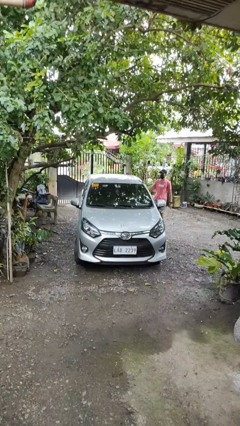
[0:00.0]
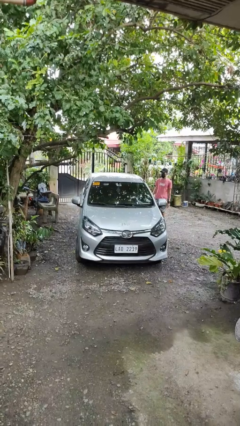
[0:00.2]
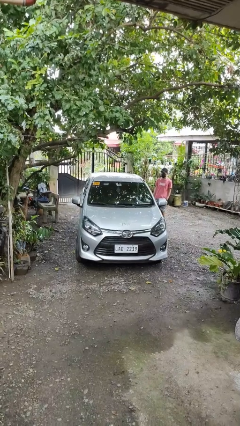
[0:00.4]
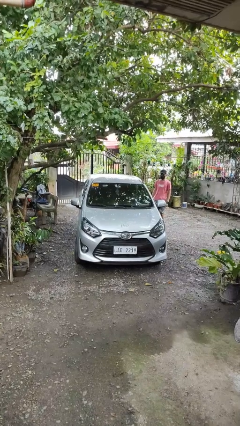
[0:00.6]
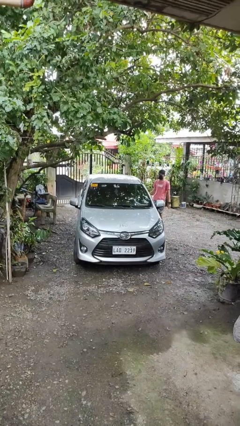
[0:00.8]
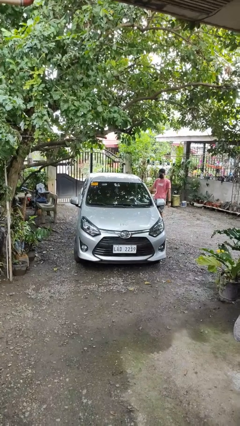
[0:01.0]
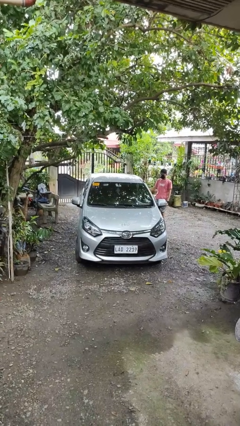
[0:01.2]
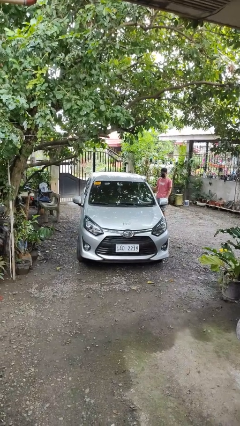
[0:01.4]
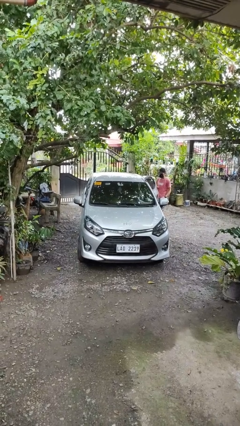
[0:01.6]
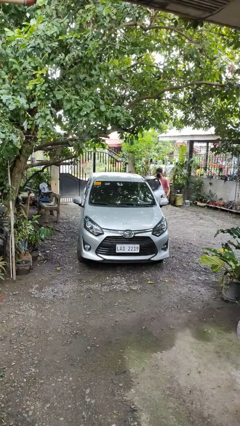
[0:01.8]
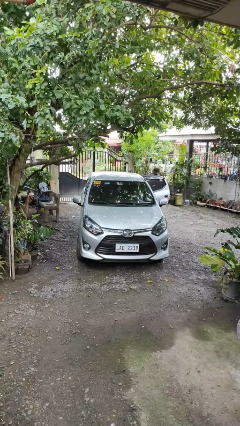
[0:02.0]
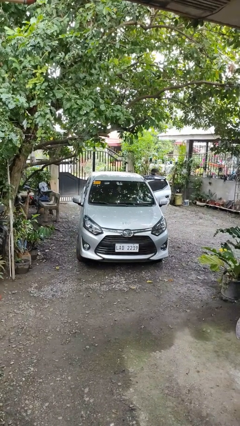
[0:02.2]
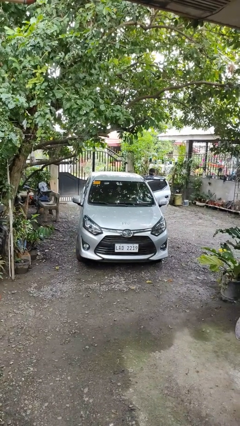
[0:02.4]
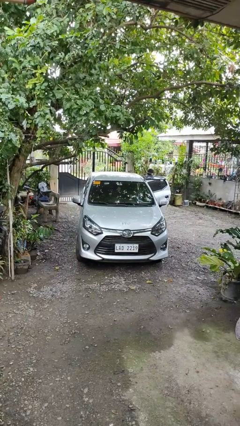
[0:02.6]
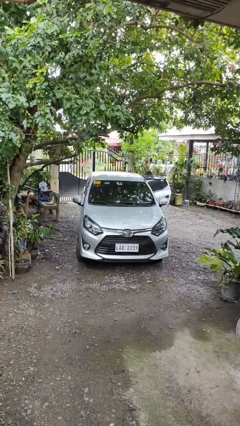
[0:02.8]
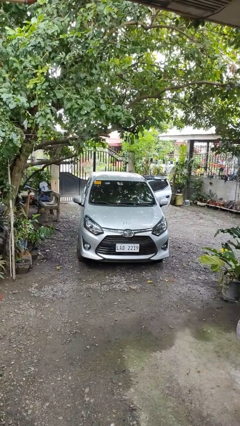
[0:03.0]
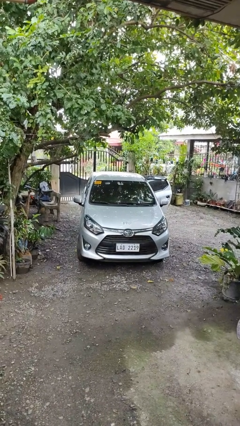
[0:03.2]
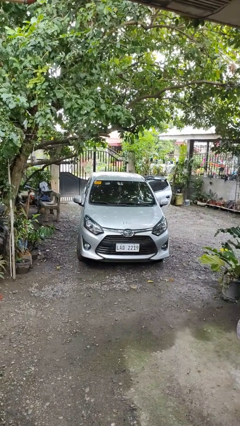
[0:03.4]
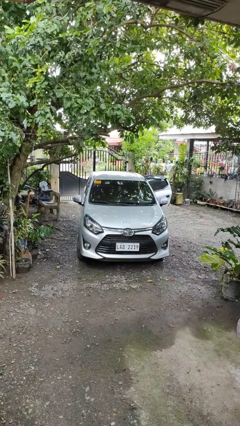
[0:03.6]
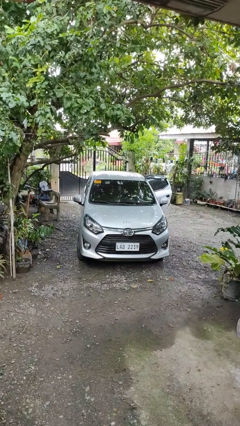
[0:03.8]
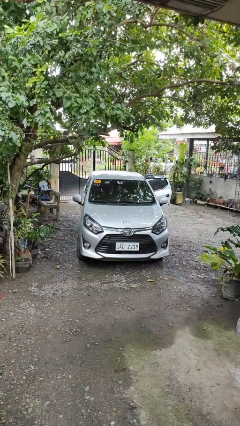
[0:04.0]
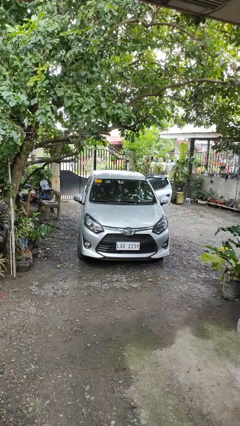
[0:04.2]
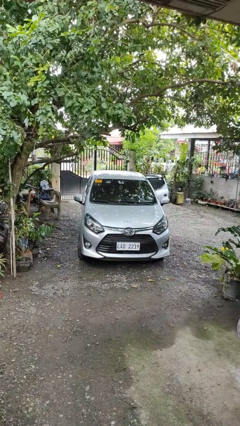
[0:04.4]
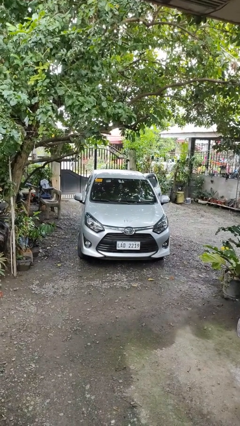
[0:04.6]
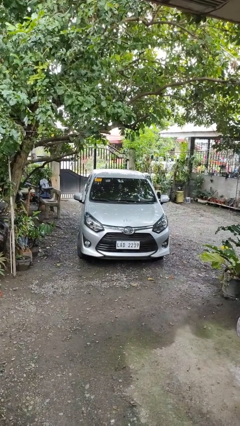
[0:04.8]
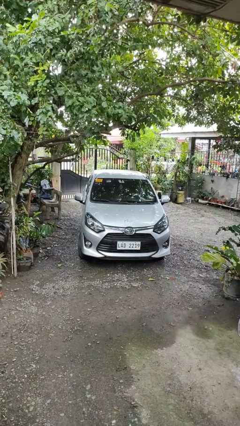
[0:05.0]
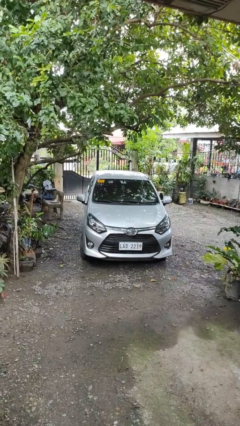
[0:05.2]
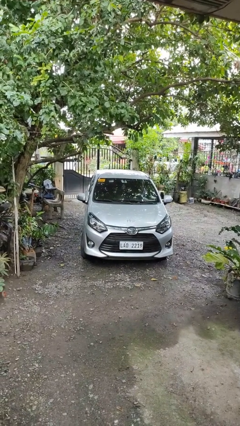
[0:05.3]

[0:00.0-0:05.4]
car picks up person

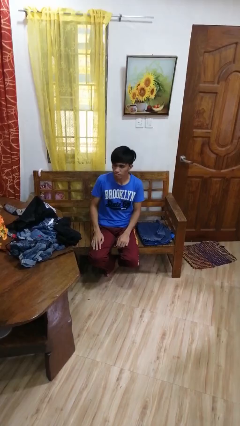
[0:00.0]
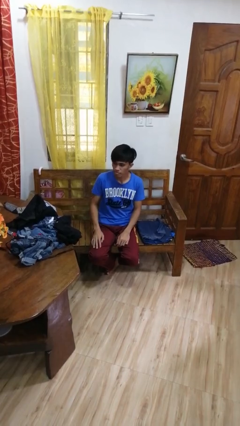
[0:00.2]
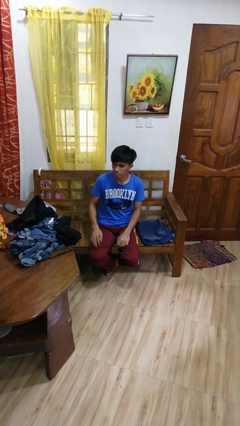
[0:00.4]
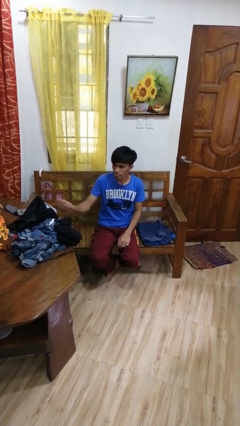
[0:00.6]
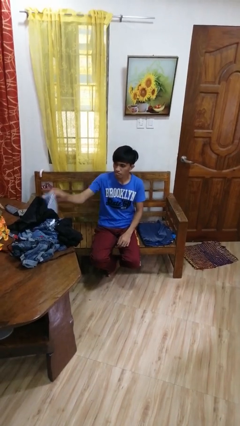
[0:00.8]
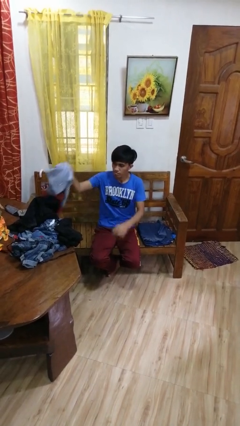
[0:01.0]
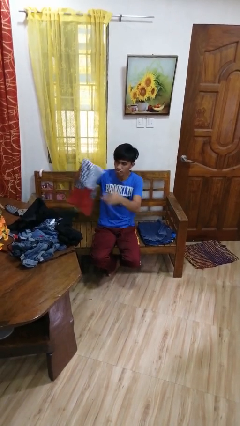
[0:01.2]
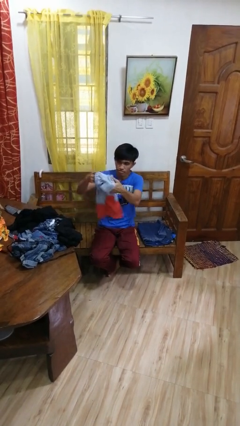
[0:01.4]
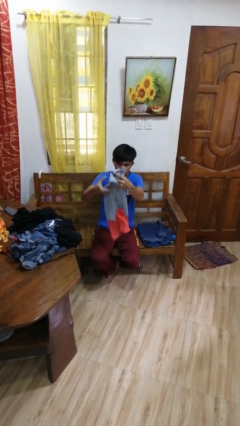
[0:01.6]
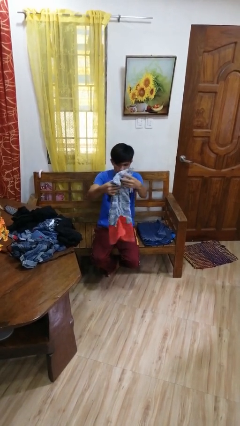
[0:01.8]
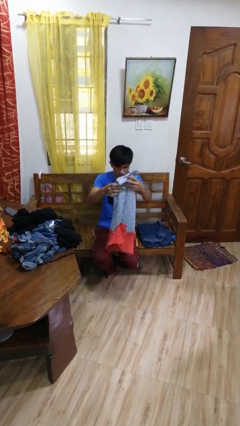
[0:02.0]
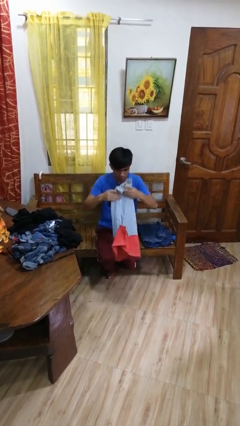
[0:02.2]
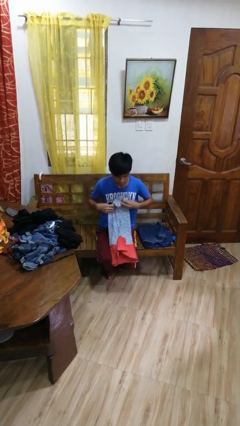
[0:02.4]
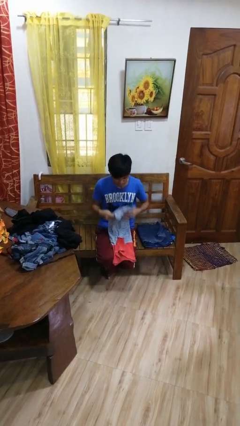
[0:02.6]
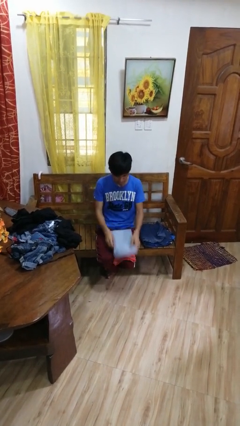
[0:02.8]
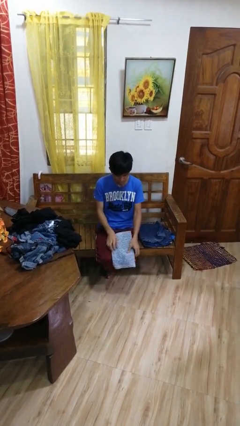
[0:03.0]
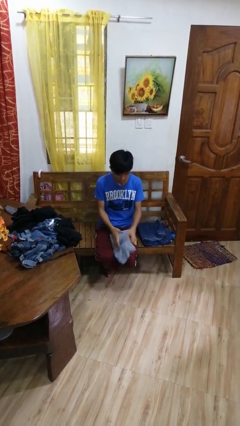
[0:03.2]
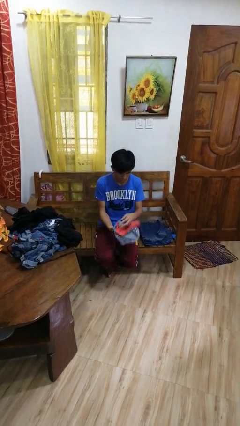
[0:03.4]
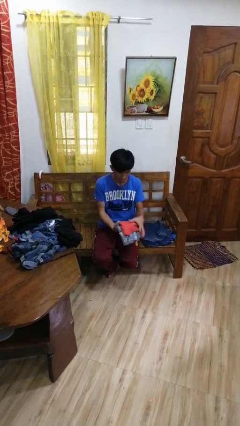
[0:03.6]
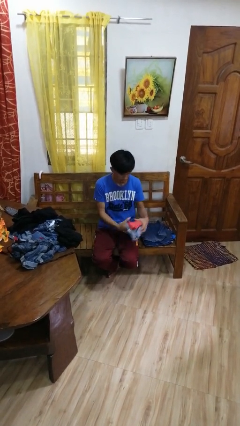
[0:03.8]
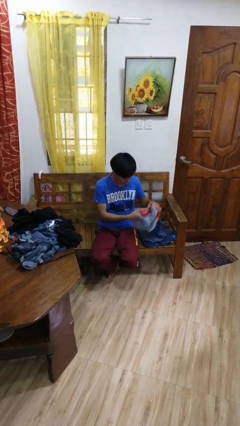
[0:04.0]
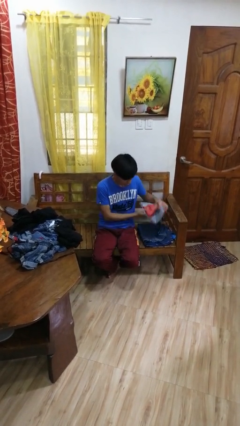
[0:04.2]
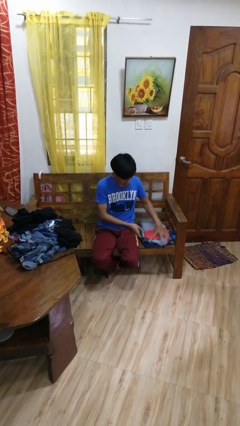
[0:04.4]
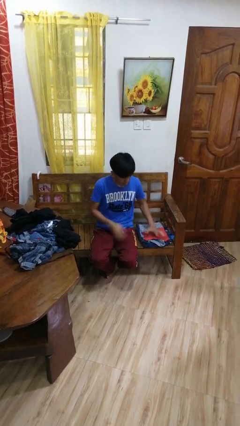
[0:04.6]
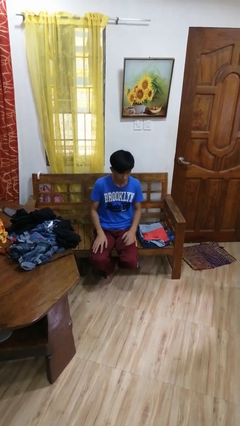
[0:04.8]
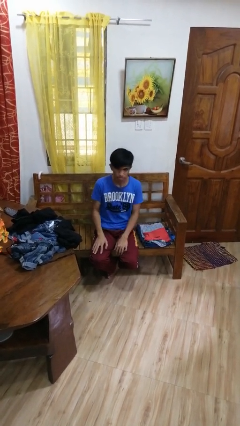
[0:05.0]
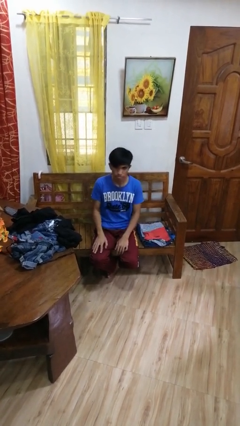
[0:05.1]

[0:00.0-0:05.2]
person folds shirt

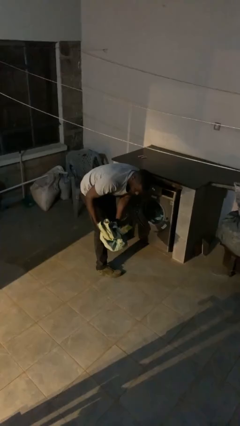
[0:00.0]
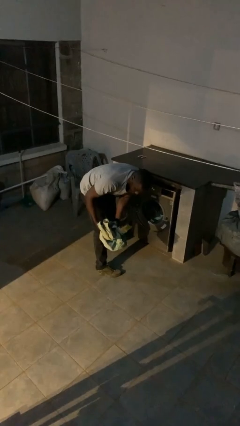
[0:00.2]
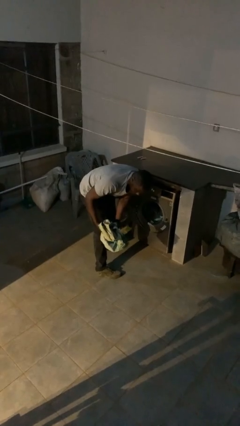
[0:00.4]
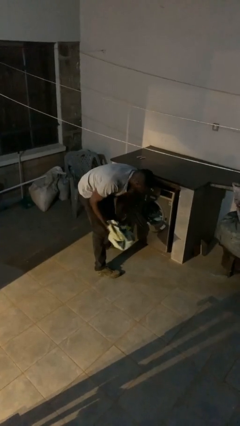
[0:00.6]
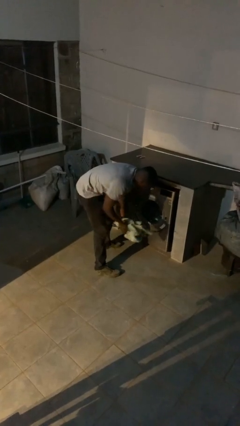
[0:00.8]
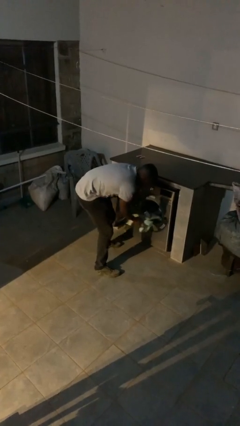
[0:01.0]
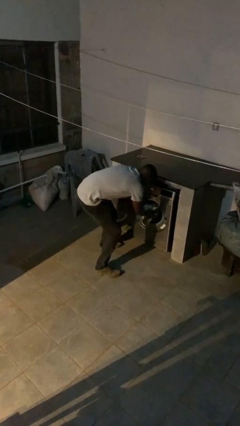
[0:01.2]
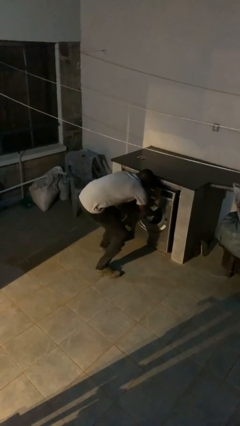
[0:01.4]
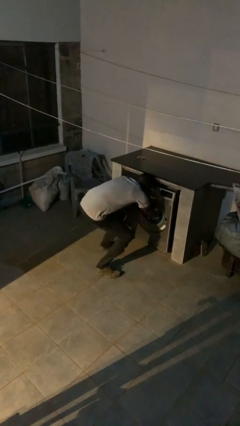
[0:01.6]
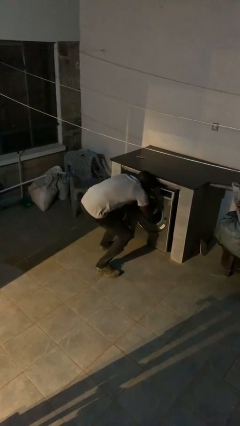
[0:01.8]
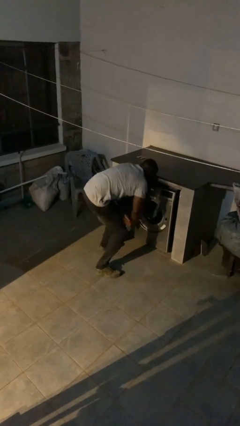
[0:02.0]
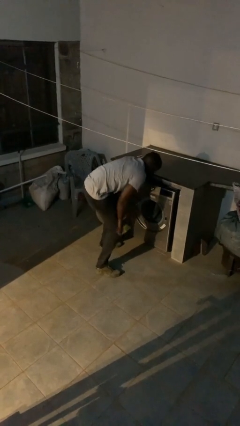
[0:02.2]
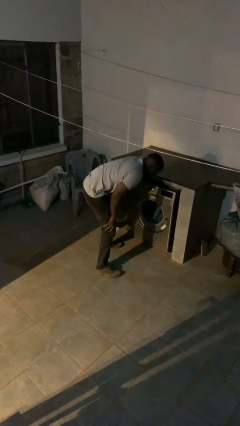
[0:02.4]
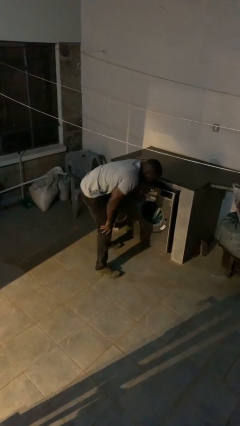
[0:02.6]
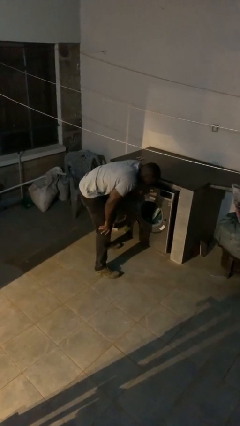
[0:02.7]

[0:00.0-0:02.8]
person loads clotheswasher

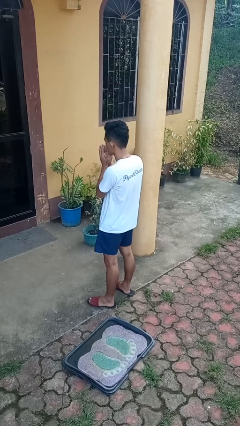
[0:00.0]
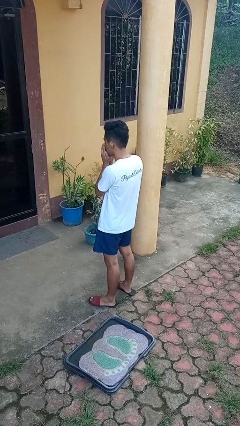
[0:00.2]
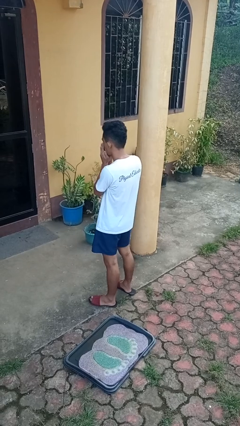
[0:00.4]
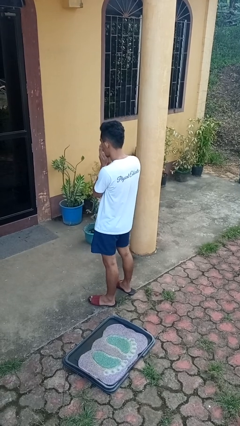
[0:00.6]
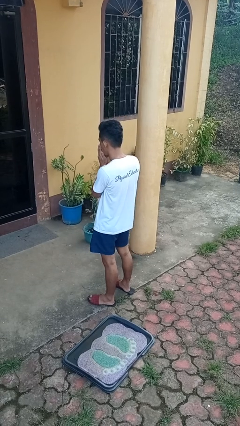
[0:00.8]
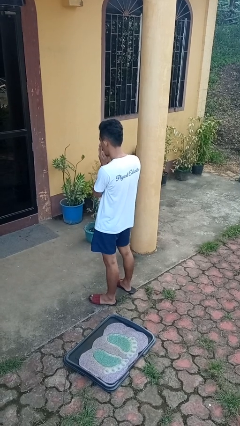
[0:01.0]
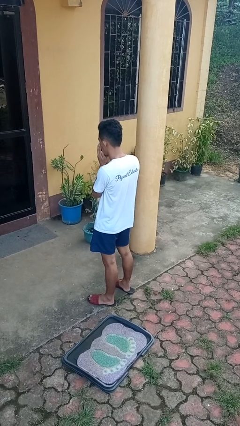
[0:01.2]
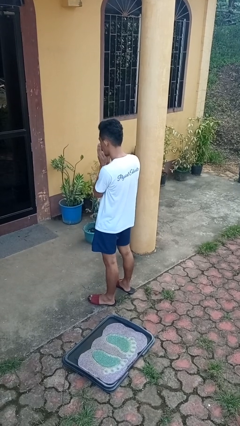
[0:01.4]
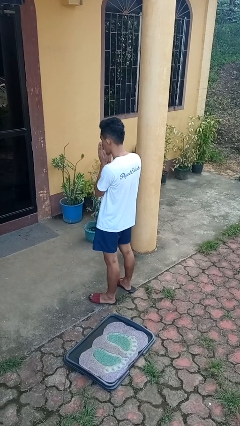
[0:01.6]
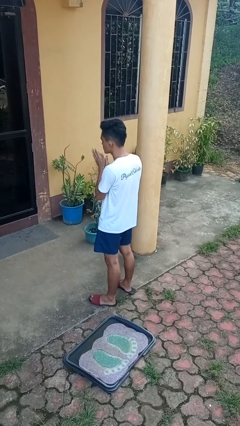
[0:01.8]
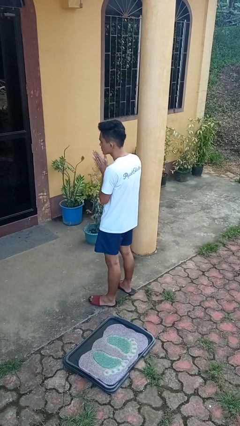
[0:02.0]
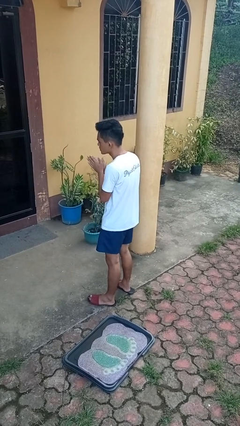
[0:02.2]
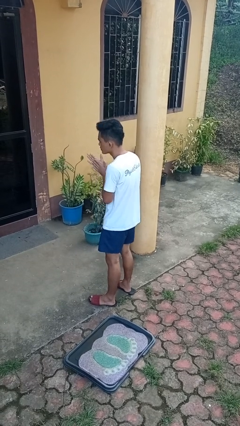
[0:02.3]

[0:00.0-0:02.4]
person blows into hands

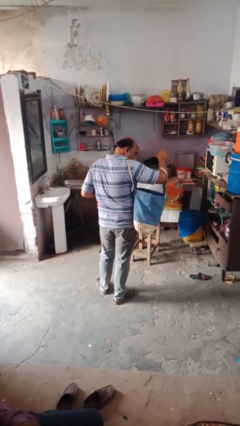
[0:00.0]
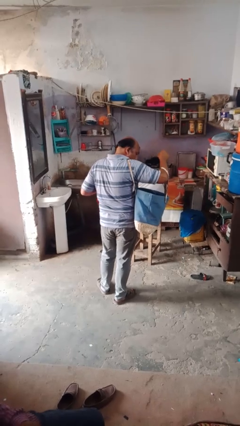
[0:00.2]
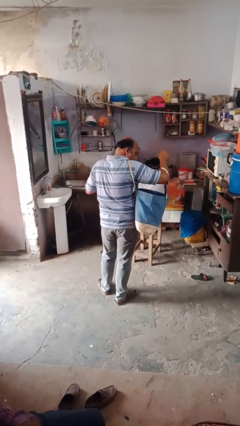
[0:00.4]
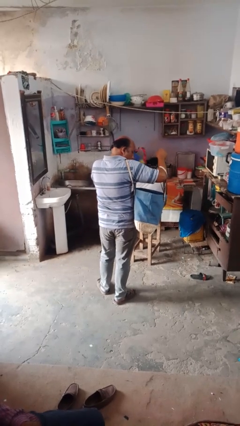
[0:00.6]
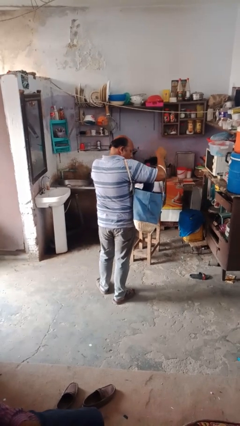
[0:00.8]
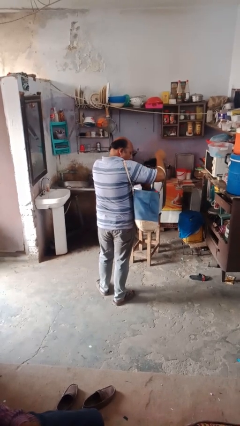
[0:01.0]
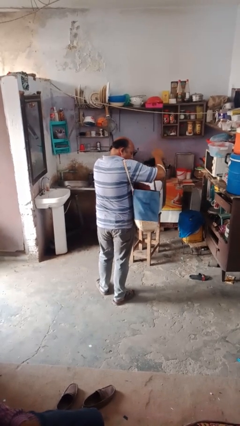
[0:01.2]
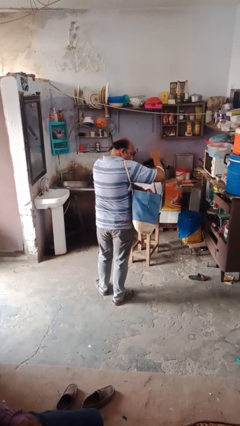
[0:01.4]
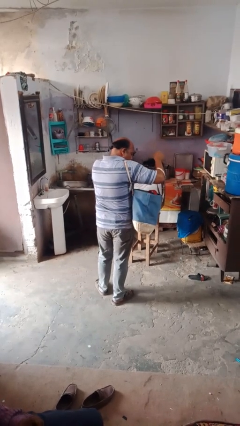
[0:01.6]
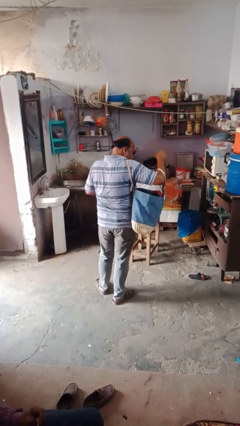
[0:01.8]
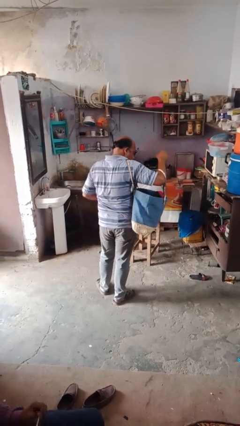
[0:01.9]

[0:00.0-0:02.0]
person puts object into bag
